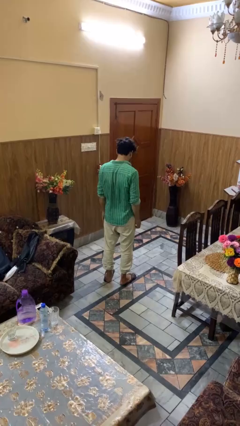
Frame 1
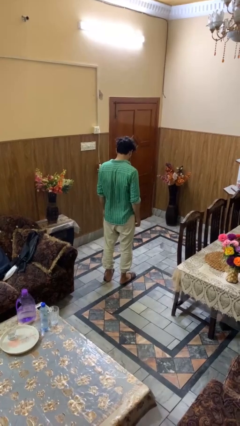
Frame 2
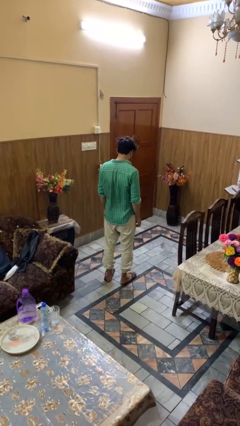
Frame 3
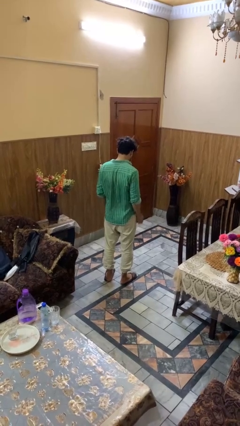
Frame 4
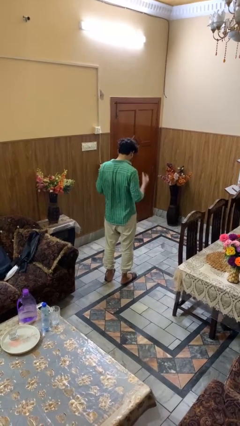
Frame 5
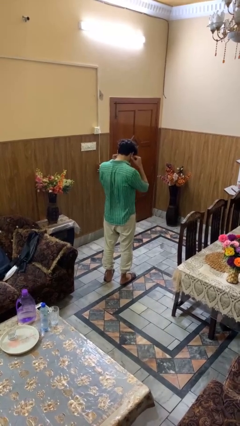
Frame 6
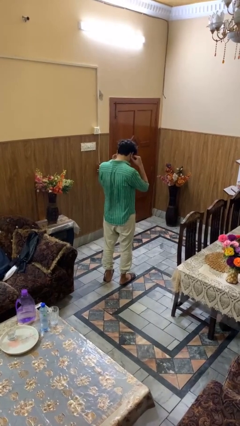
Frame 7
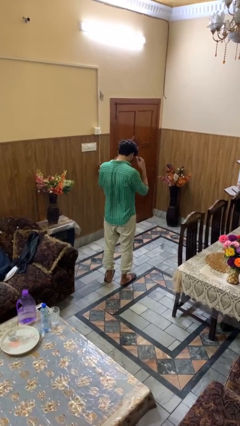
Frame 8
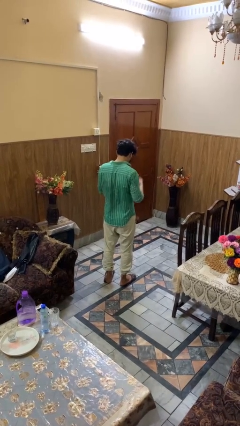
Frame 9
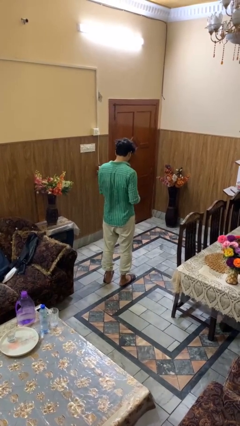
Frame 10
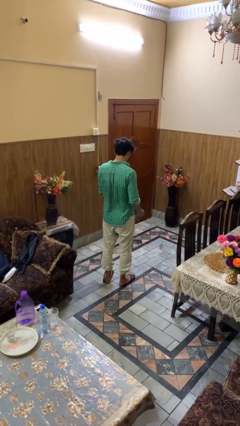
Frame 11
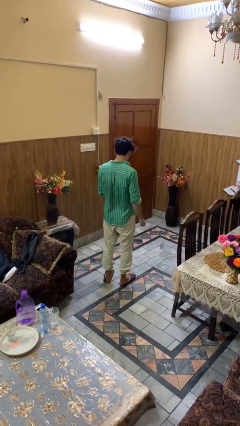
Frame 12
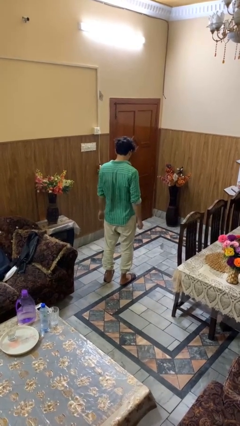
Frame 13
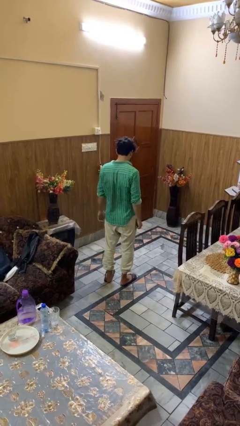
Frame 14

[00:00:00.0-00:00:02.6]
person takes off headphones

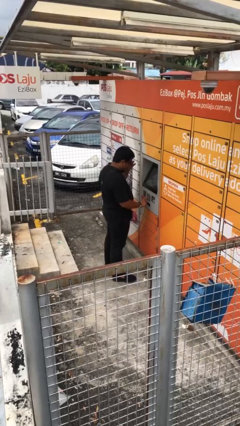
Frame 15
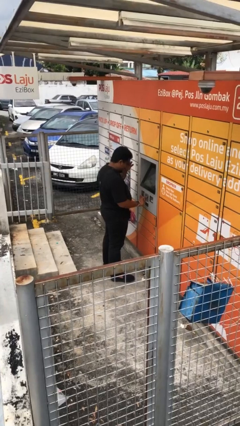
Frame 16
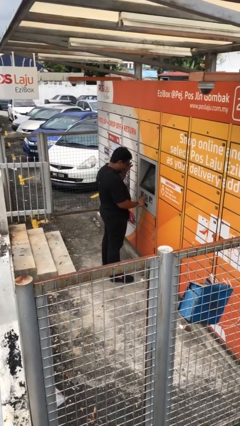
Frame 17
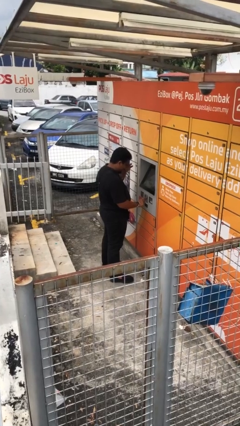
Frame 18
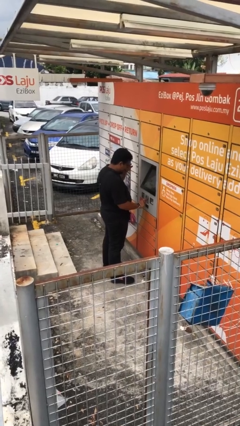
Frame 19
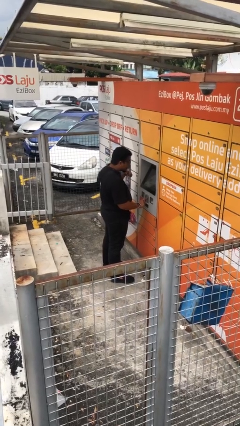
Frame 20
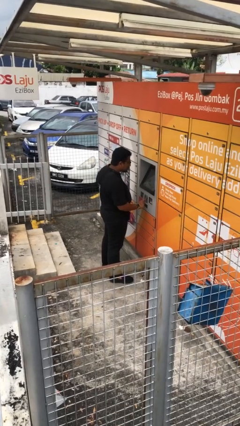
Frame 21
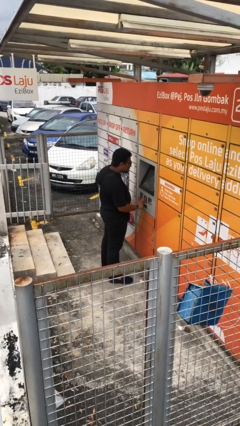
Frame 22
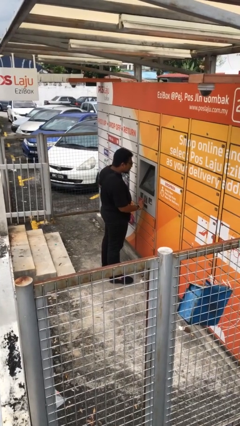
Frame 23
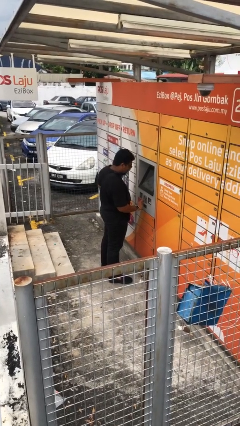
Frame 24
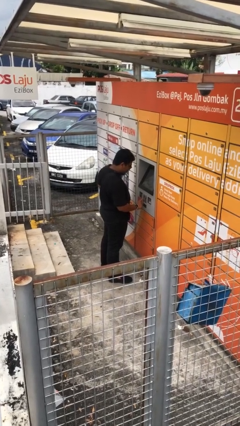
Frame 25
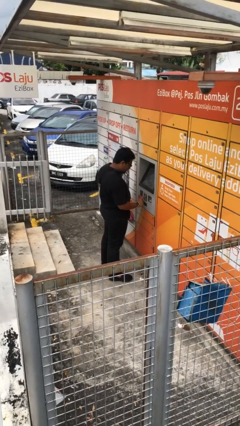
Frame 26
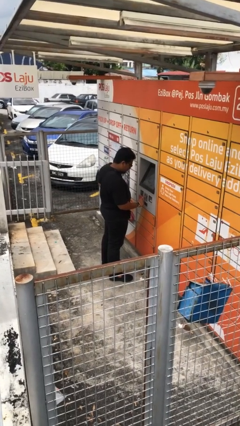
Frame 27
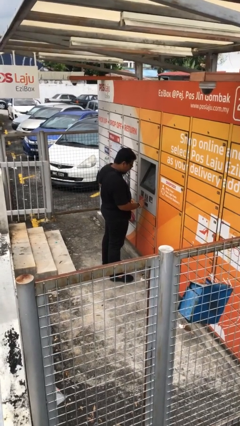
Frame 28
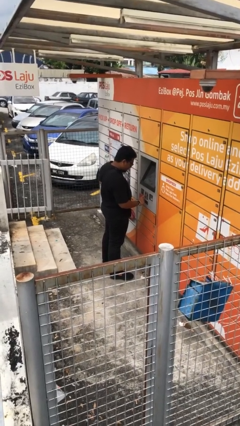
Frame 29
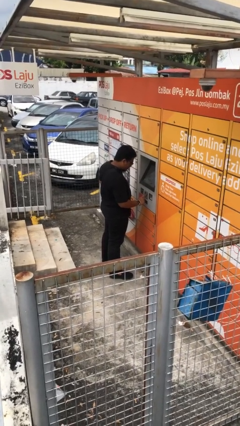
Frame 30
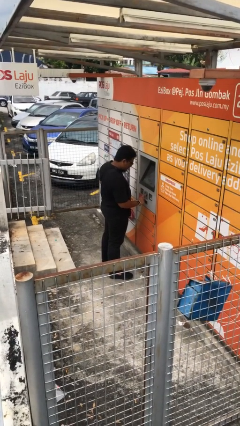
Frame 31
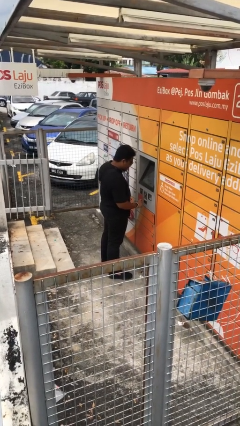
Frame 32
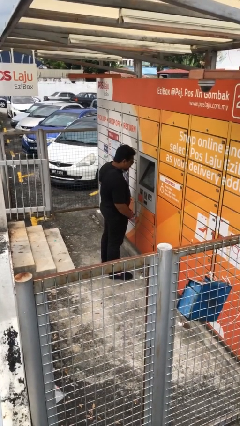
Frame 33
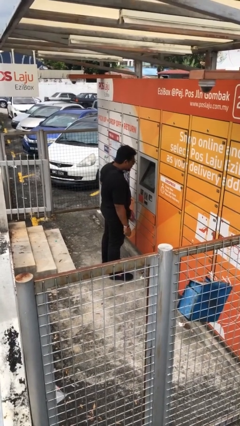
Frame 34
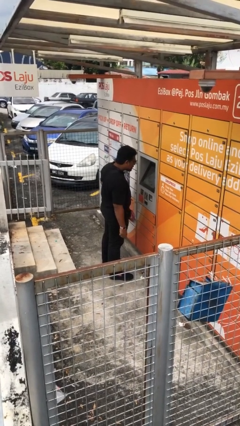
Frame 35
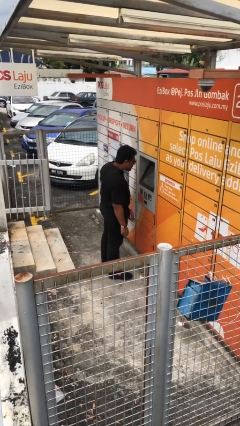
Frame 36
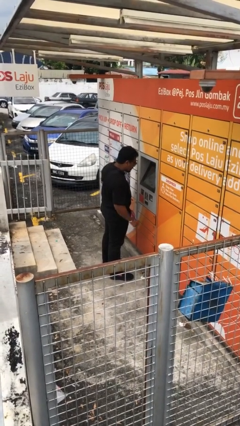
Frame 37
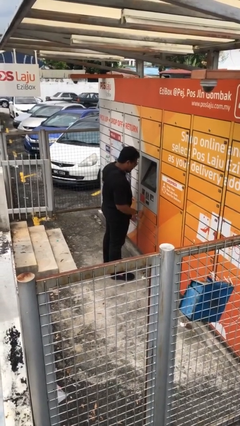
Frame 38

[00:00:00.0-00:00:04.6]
person purchases from machine

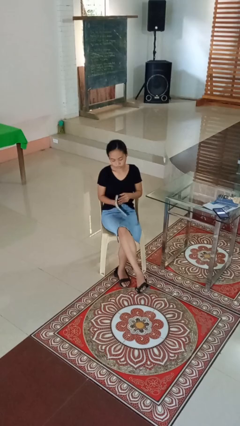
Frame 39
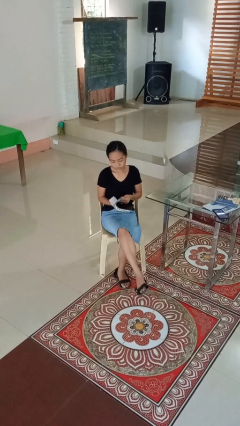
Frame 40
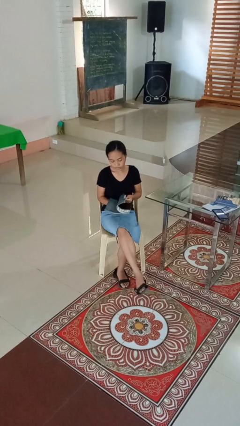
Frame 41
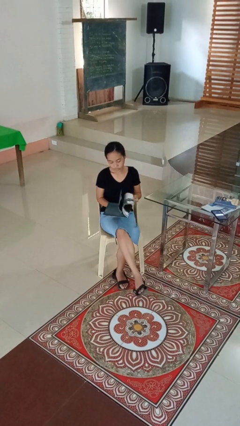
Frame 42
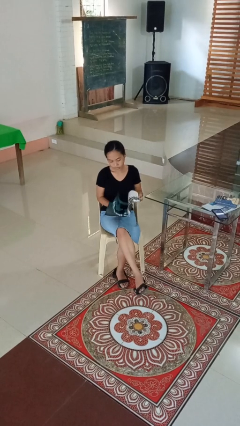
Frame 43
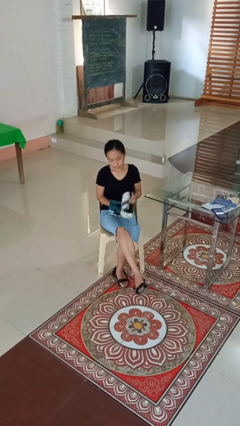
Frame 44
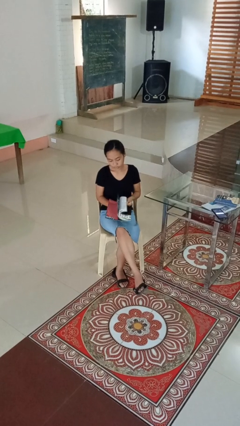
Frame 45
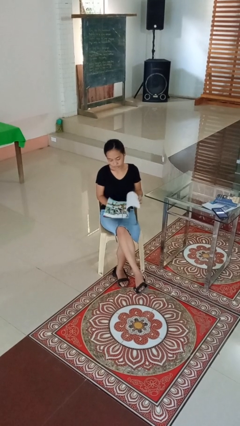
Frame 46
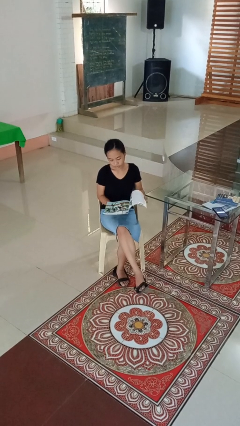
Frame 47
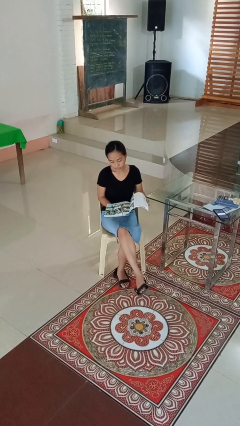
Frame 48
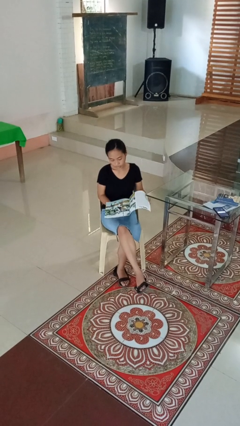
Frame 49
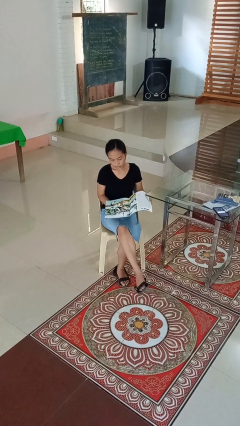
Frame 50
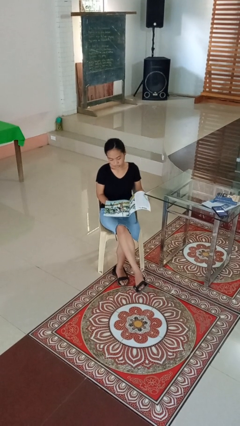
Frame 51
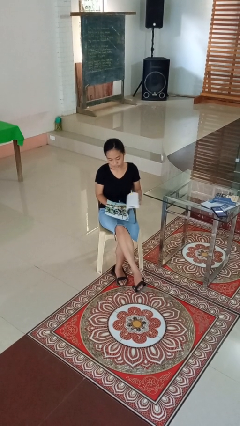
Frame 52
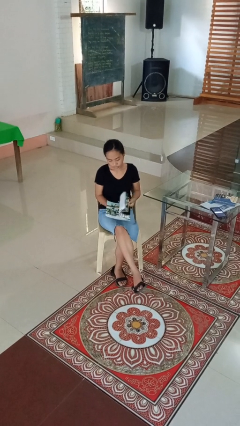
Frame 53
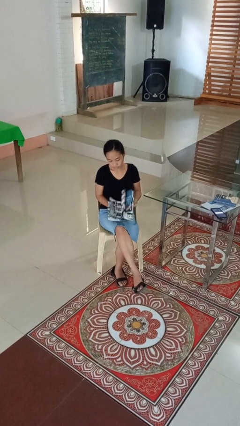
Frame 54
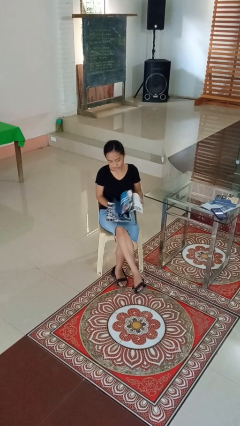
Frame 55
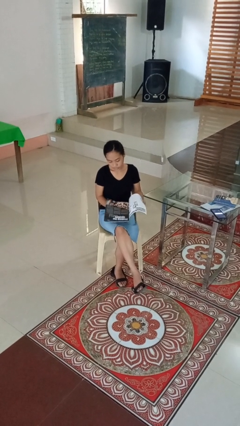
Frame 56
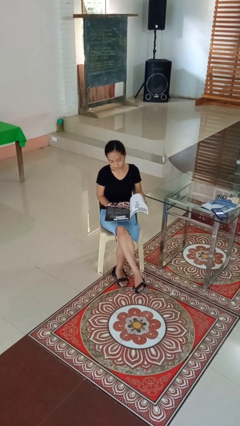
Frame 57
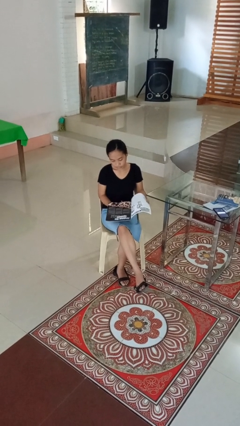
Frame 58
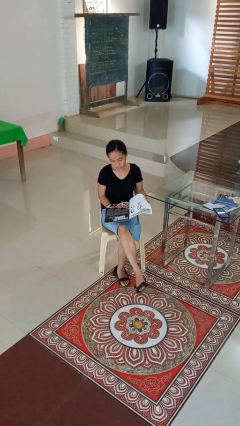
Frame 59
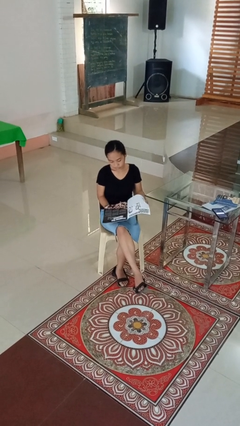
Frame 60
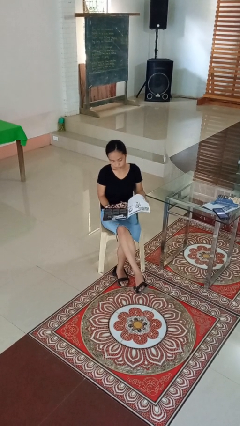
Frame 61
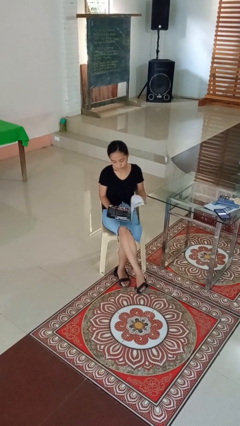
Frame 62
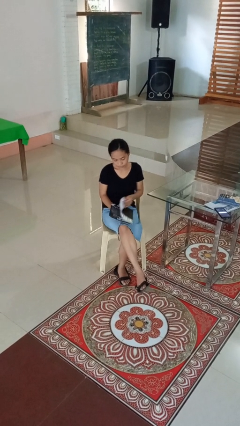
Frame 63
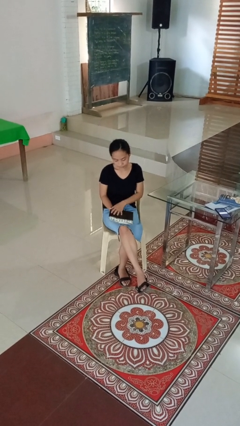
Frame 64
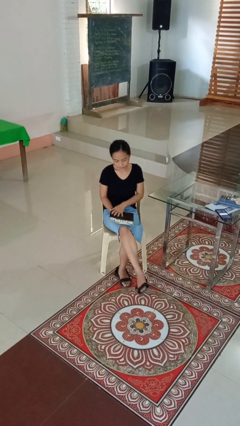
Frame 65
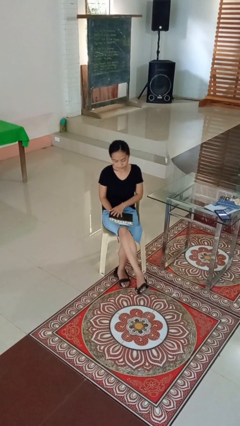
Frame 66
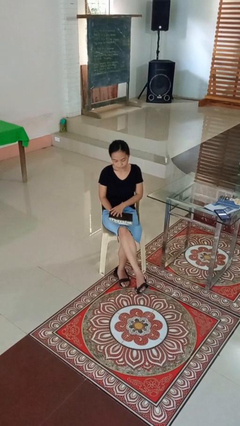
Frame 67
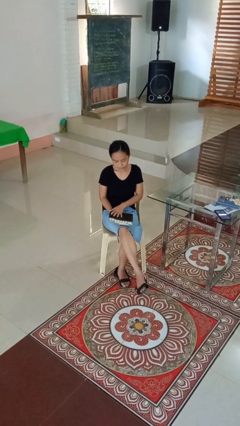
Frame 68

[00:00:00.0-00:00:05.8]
person reads magazine

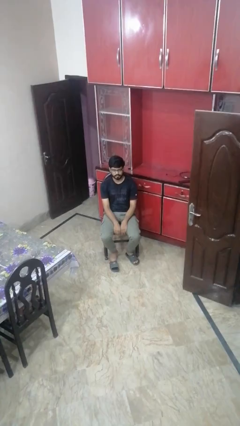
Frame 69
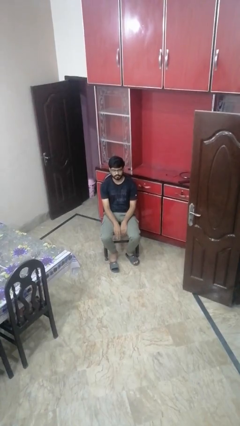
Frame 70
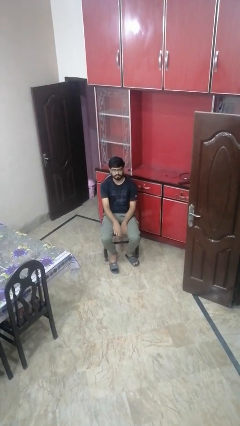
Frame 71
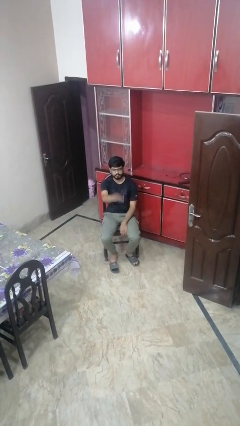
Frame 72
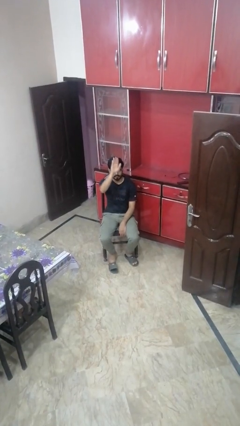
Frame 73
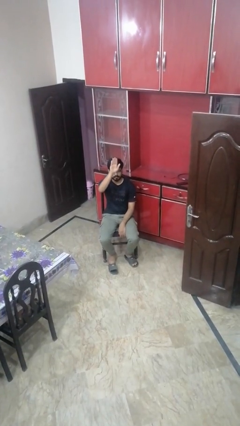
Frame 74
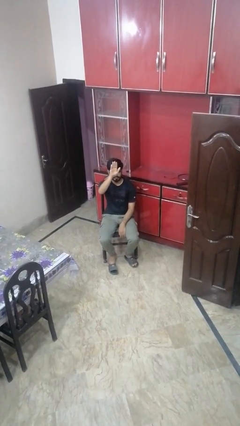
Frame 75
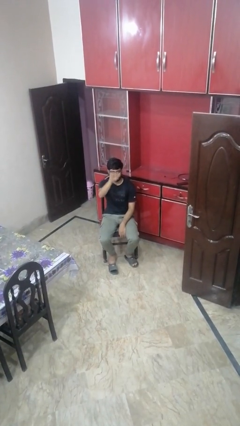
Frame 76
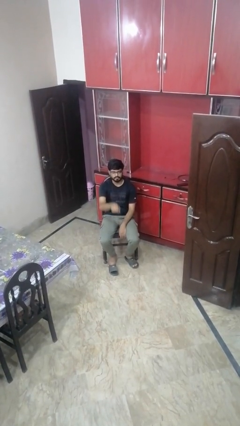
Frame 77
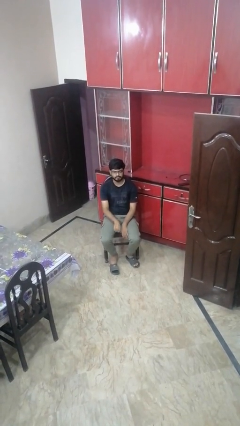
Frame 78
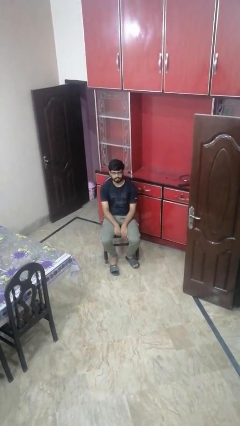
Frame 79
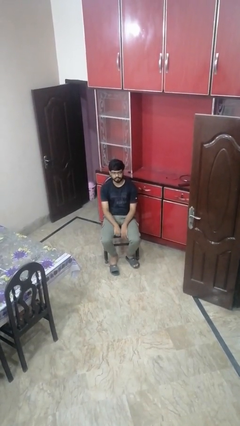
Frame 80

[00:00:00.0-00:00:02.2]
person gestures swipe up

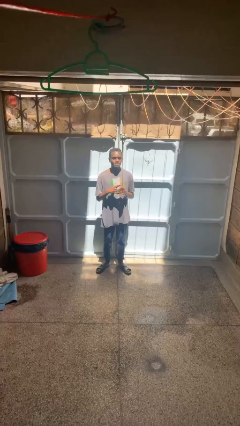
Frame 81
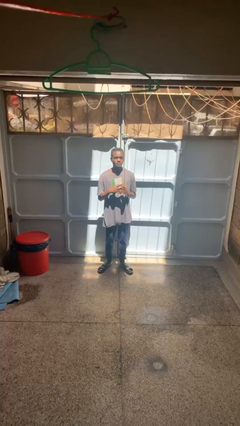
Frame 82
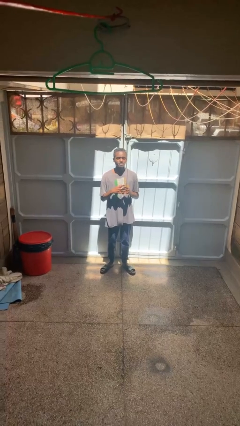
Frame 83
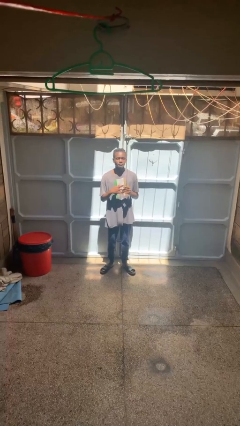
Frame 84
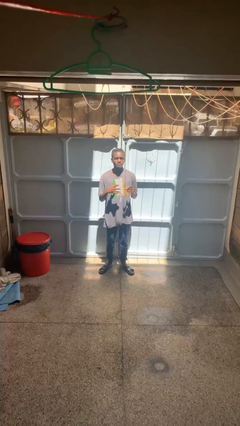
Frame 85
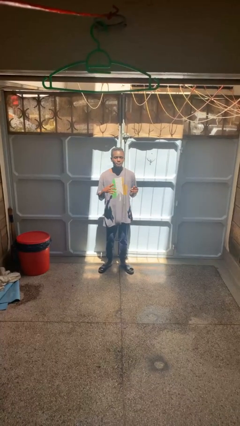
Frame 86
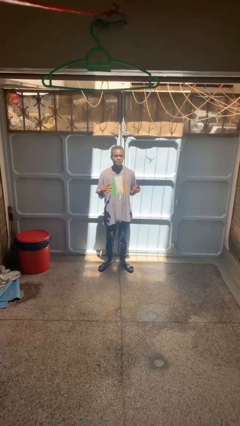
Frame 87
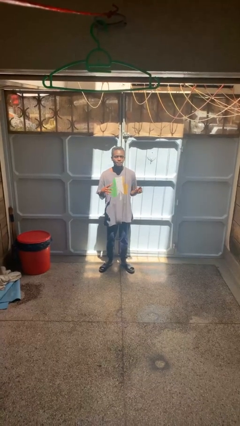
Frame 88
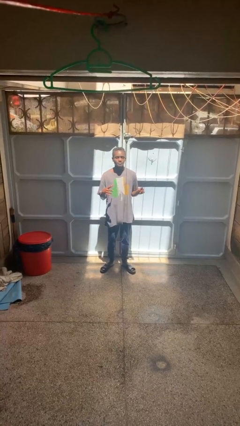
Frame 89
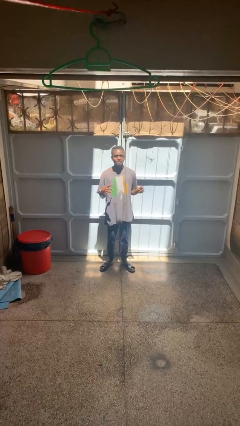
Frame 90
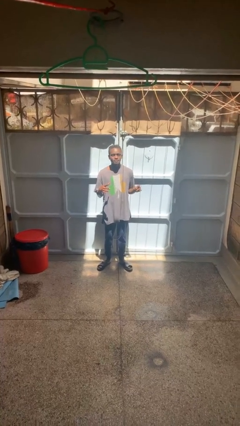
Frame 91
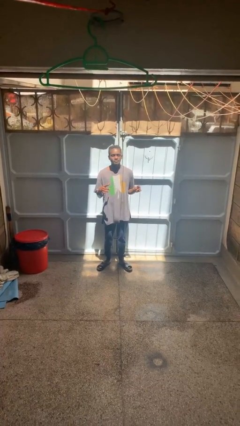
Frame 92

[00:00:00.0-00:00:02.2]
person takes off ring

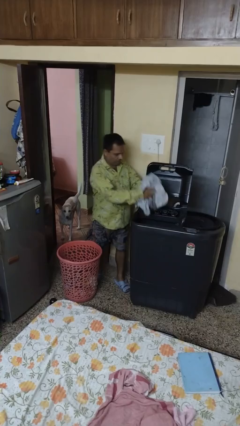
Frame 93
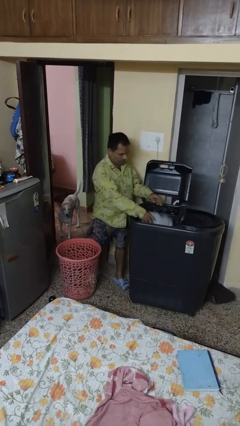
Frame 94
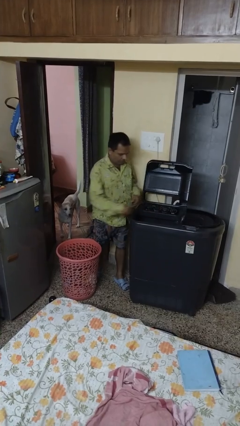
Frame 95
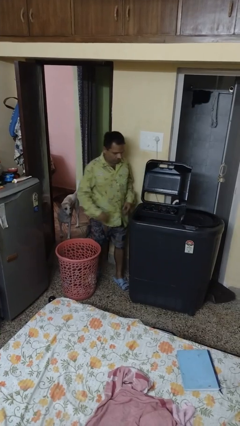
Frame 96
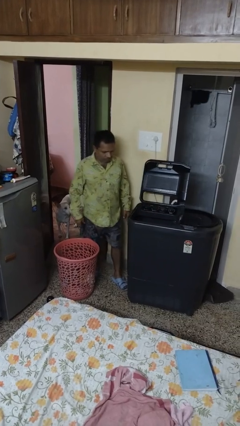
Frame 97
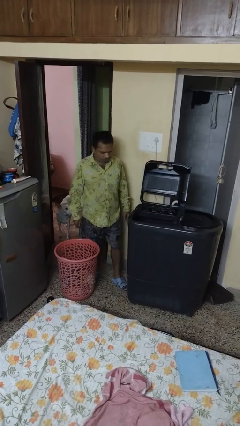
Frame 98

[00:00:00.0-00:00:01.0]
person loads clotheswasher
